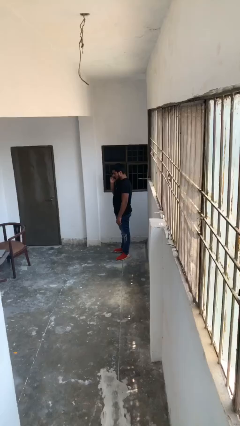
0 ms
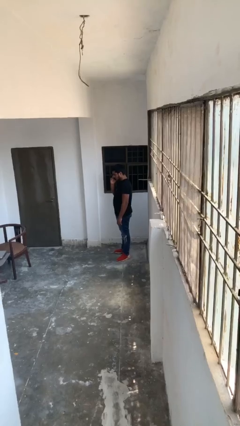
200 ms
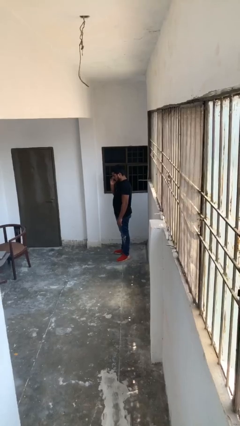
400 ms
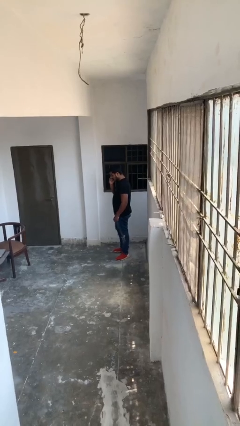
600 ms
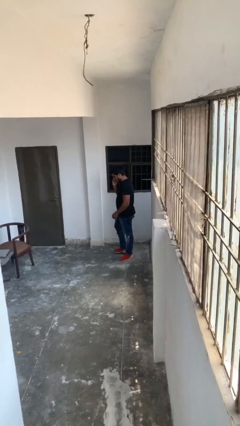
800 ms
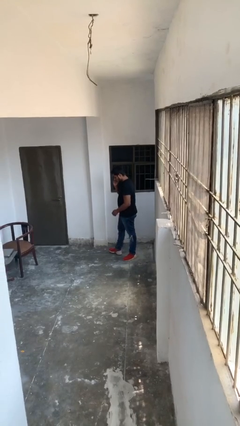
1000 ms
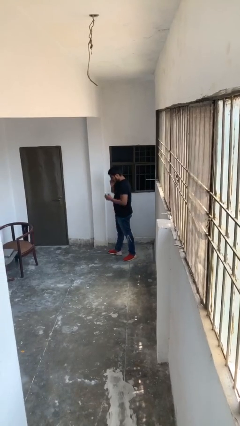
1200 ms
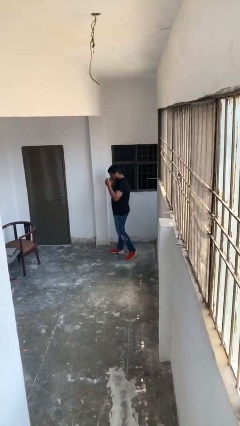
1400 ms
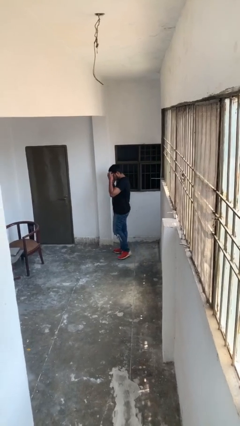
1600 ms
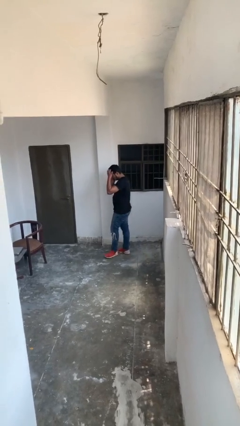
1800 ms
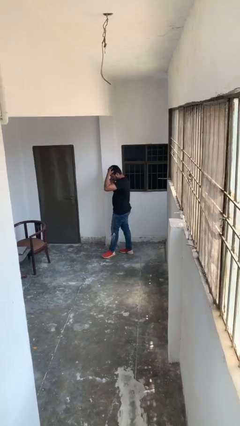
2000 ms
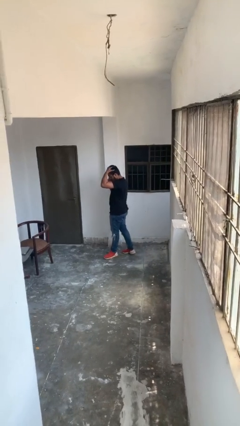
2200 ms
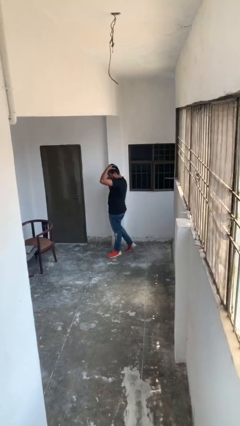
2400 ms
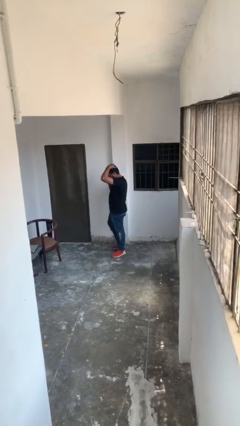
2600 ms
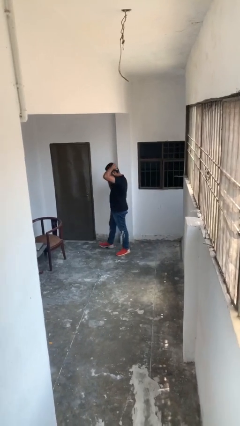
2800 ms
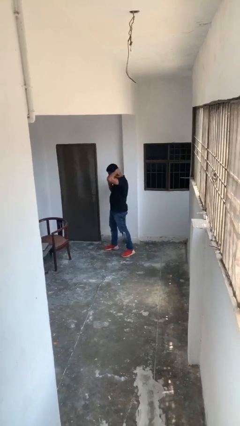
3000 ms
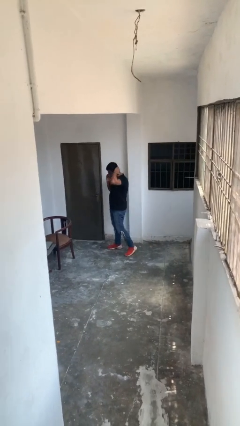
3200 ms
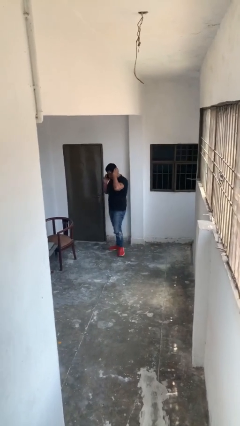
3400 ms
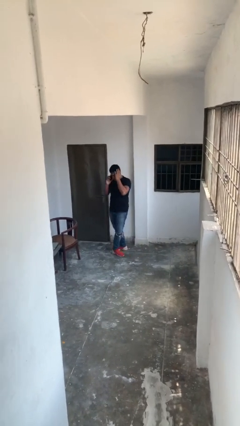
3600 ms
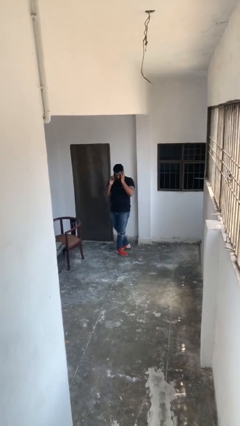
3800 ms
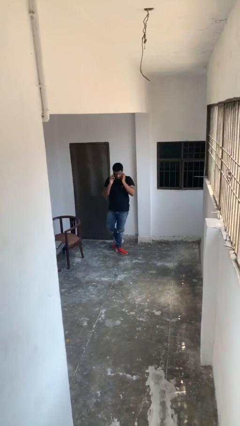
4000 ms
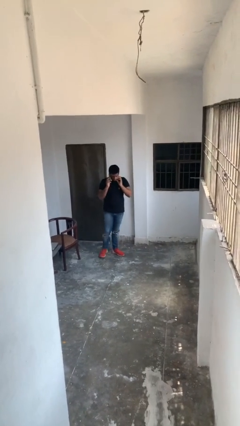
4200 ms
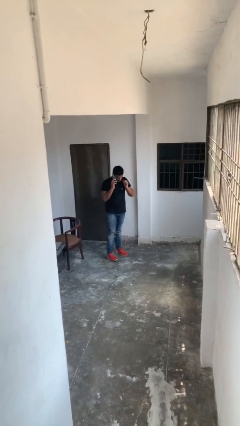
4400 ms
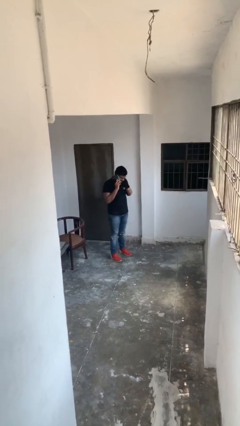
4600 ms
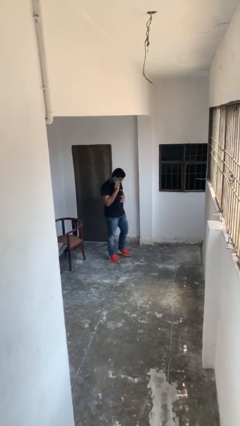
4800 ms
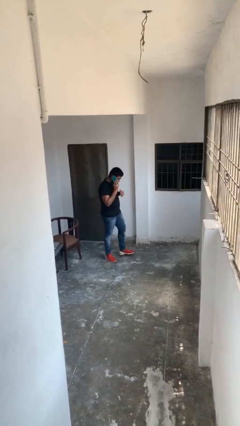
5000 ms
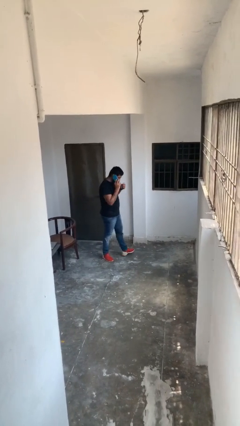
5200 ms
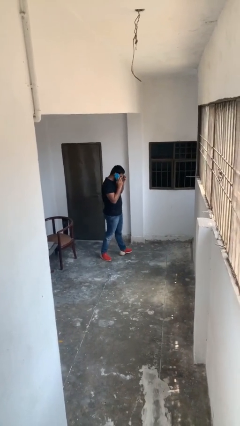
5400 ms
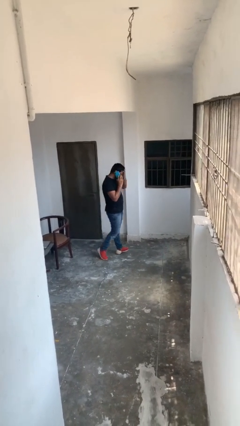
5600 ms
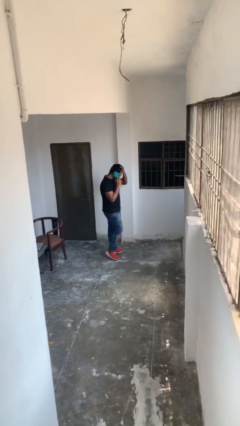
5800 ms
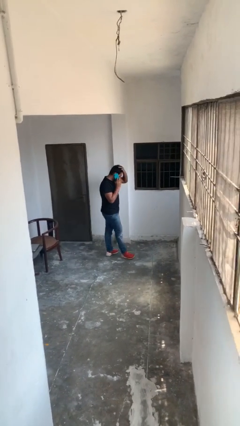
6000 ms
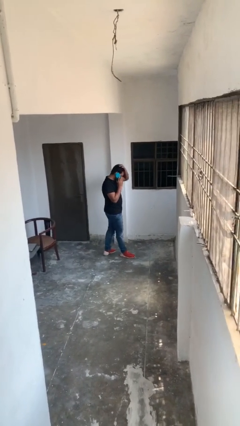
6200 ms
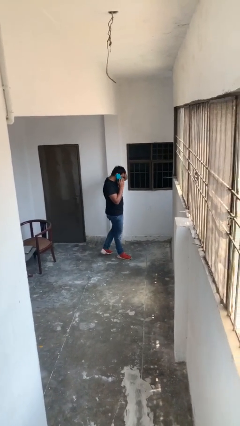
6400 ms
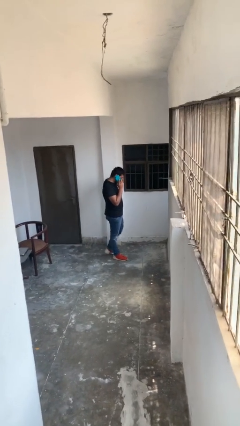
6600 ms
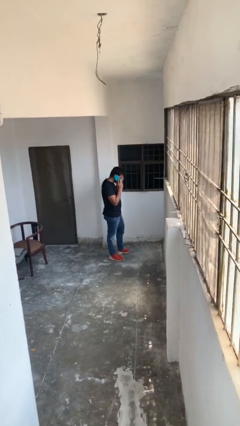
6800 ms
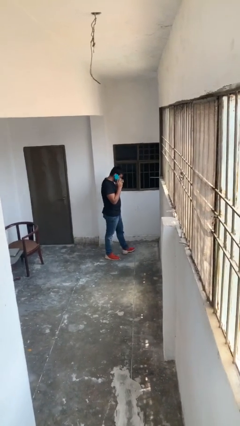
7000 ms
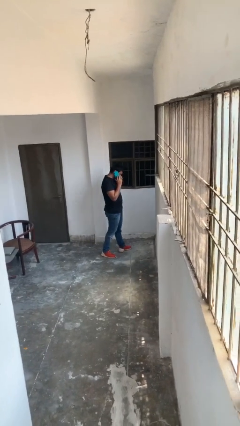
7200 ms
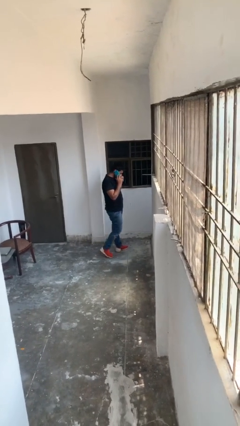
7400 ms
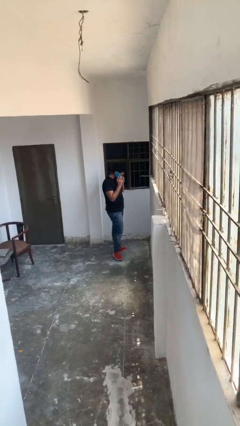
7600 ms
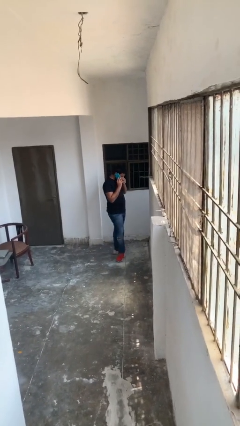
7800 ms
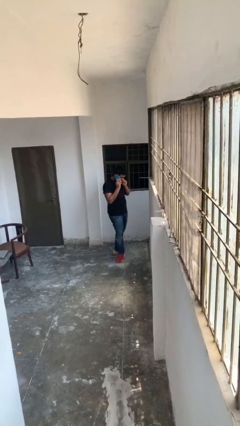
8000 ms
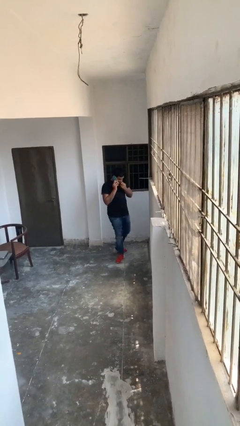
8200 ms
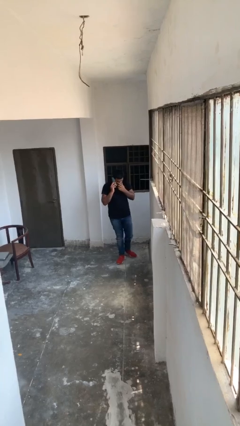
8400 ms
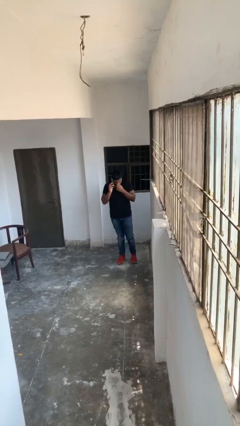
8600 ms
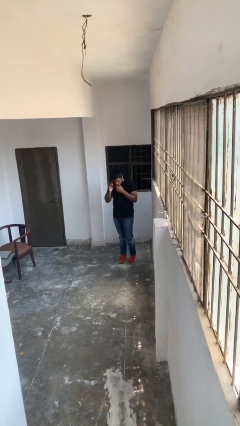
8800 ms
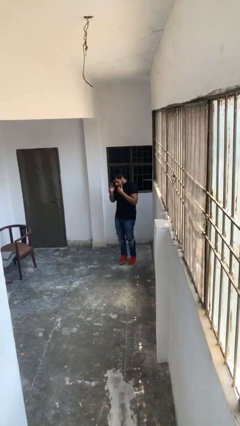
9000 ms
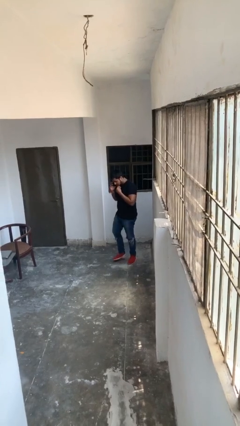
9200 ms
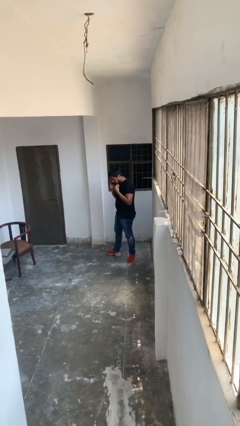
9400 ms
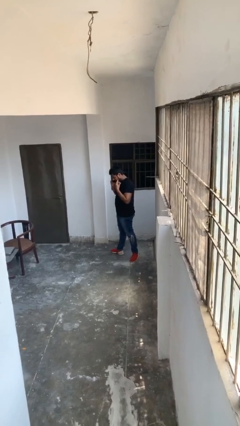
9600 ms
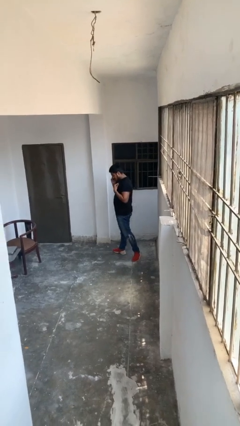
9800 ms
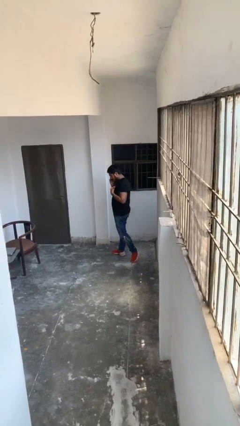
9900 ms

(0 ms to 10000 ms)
person talks on phone

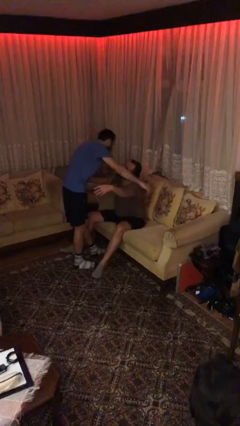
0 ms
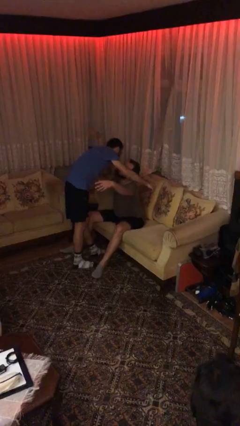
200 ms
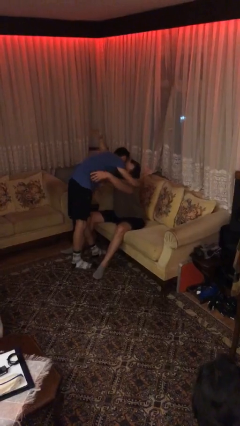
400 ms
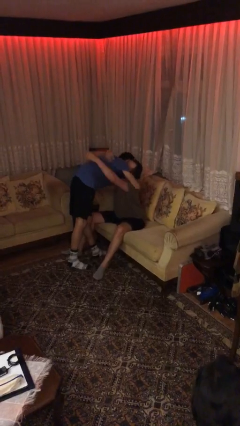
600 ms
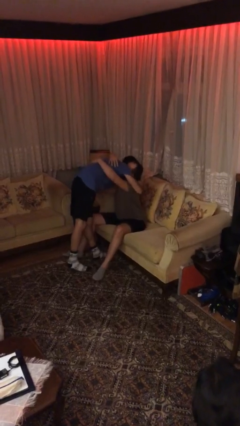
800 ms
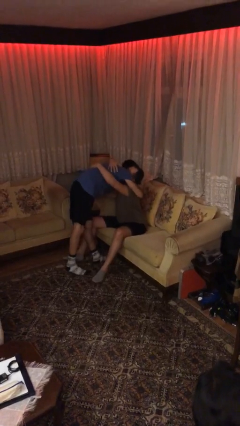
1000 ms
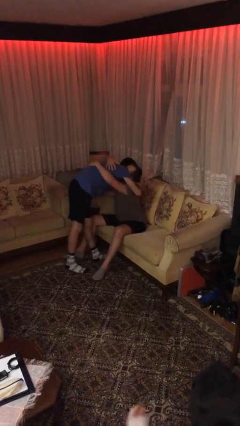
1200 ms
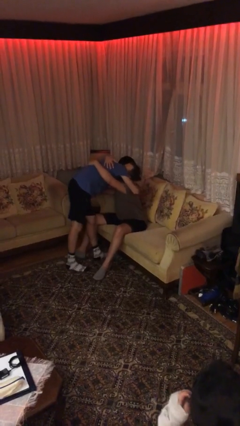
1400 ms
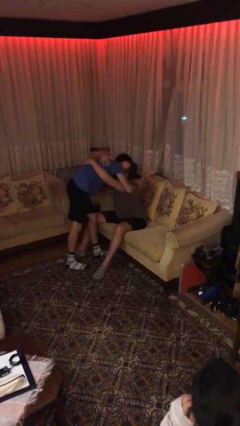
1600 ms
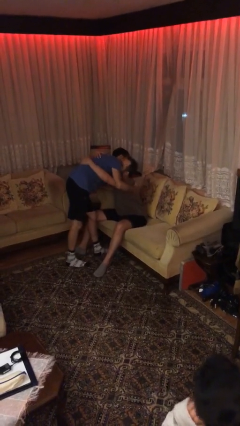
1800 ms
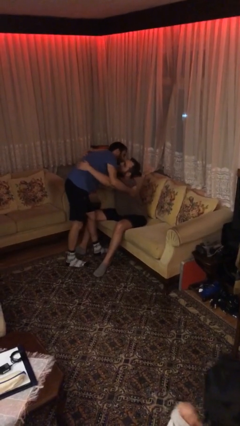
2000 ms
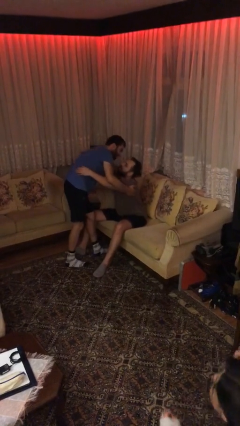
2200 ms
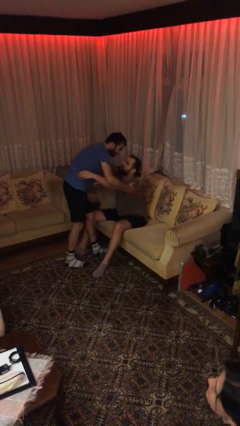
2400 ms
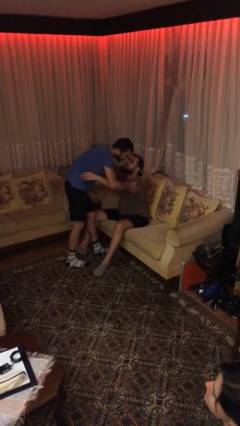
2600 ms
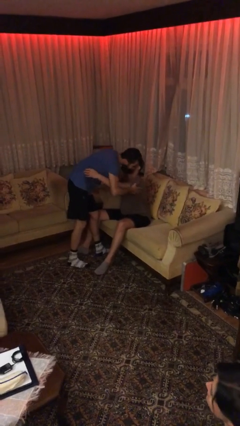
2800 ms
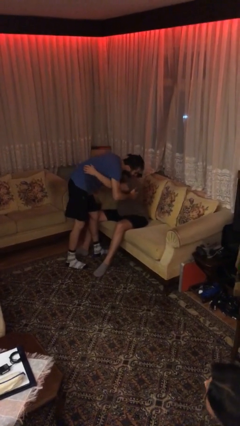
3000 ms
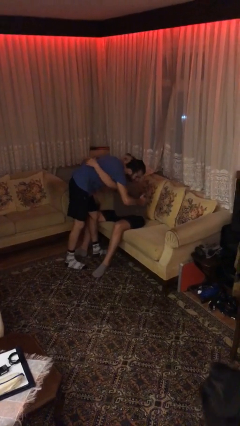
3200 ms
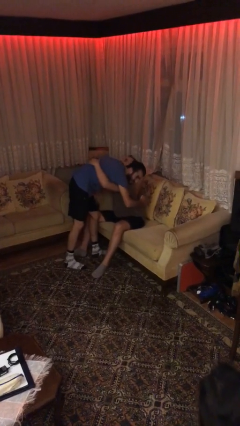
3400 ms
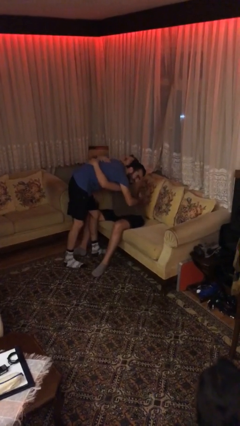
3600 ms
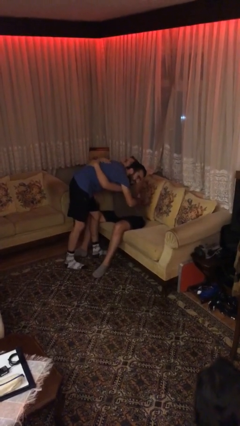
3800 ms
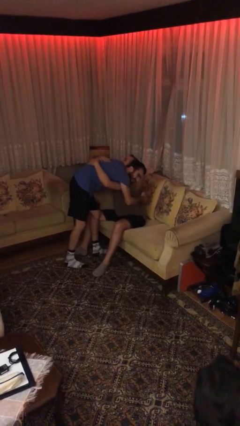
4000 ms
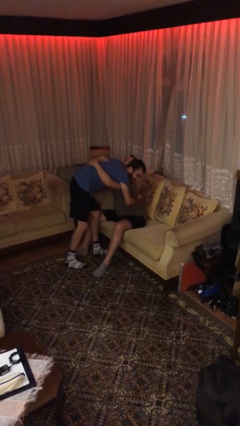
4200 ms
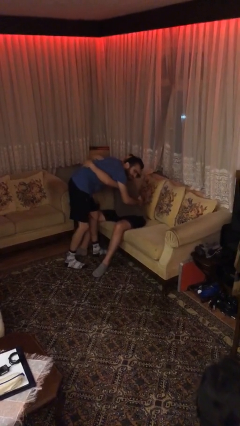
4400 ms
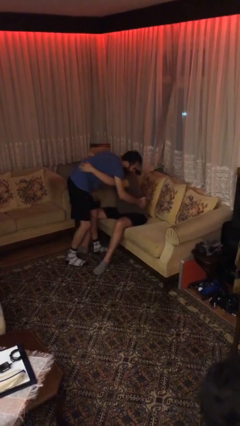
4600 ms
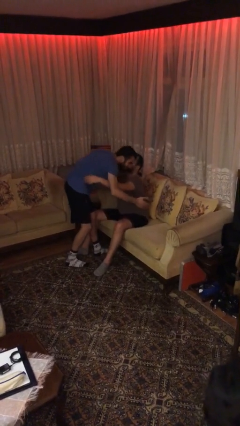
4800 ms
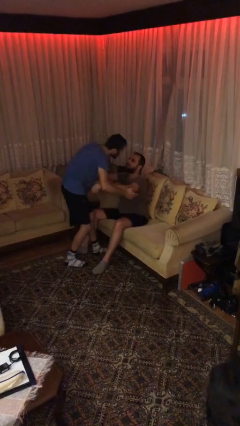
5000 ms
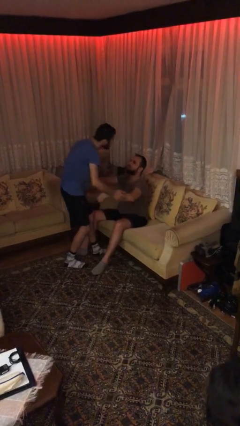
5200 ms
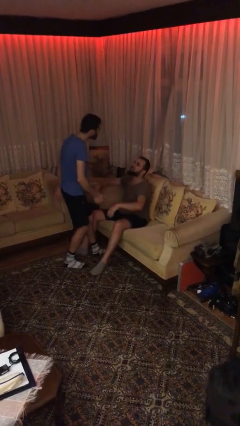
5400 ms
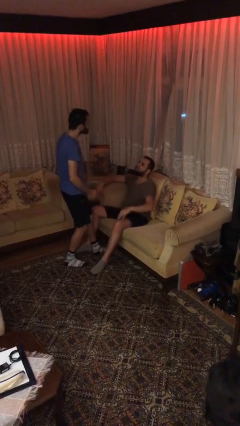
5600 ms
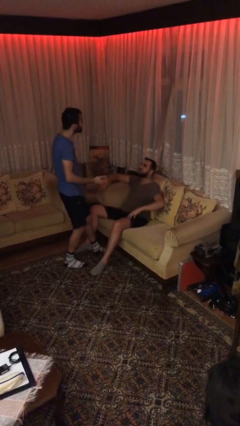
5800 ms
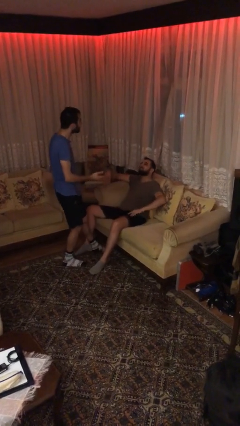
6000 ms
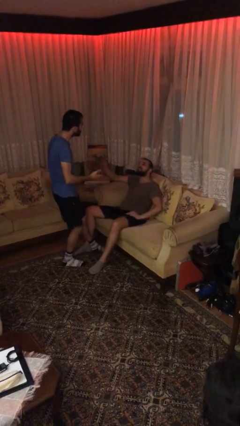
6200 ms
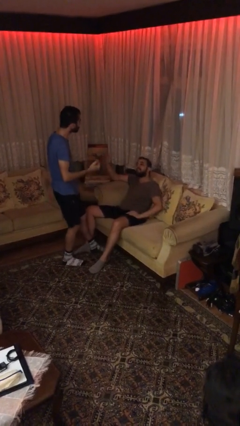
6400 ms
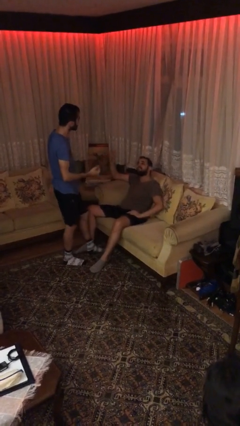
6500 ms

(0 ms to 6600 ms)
person embraces person

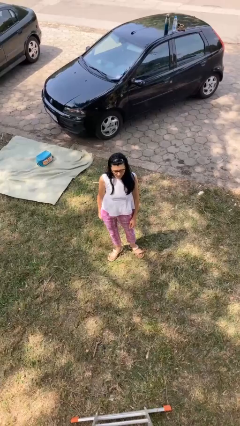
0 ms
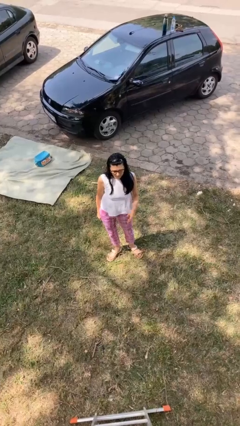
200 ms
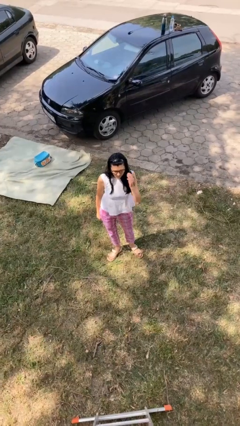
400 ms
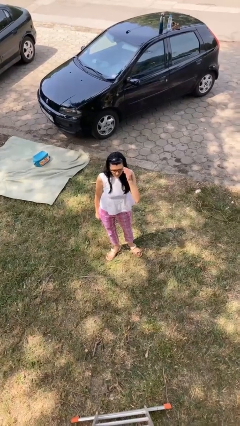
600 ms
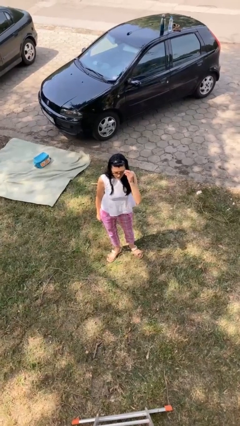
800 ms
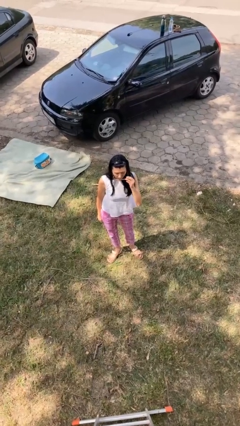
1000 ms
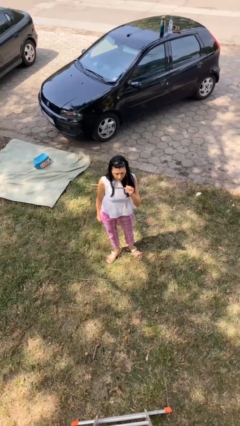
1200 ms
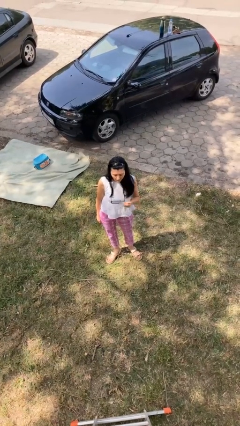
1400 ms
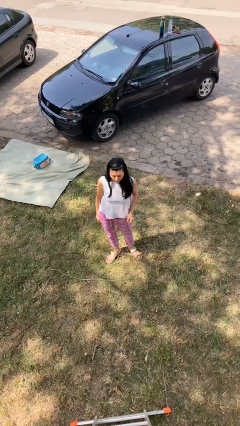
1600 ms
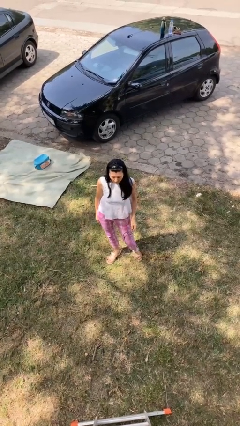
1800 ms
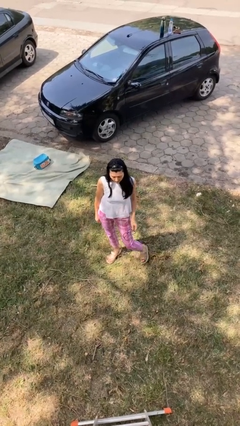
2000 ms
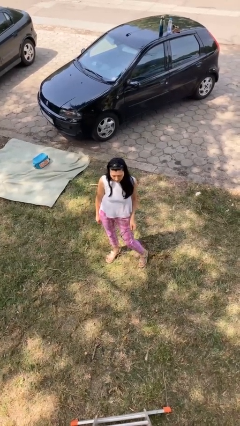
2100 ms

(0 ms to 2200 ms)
person takes off glasses
